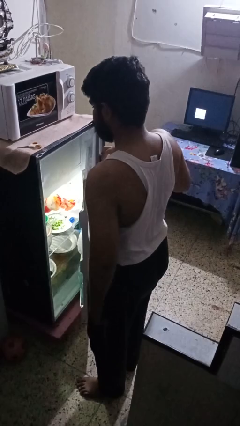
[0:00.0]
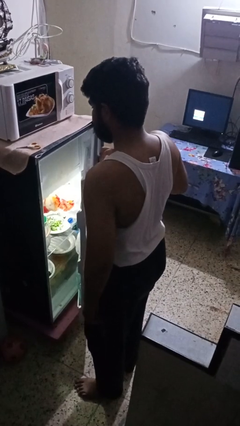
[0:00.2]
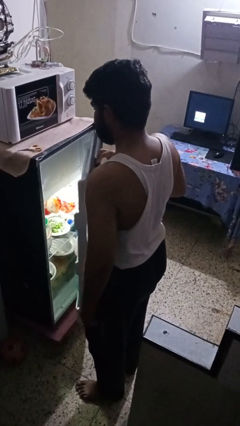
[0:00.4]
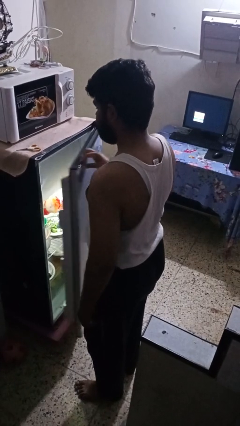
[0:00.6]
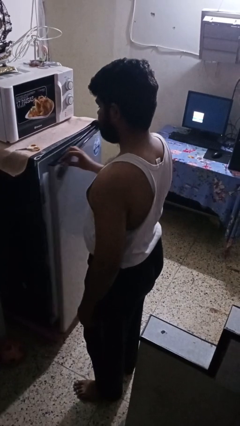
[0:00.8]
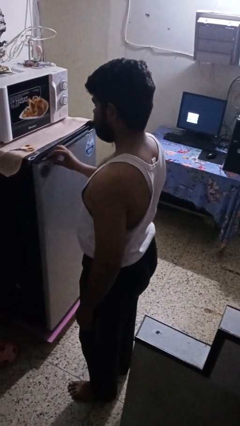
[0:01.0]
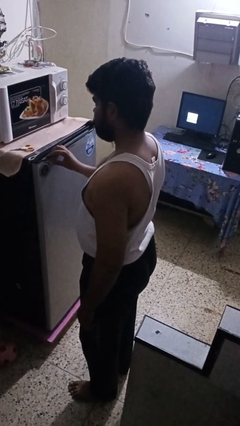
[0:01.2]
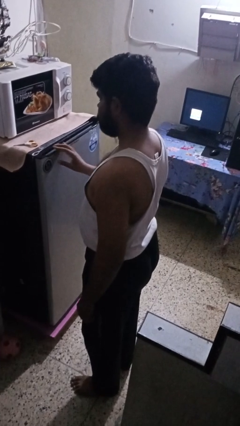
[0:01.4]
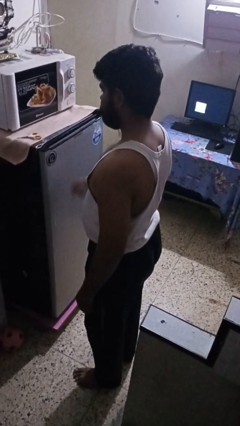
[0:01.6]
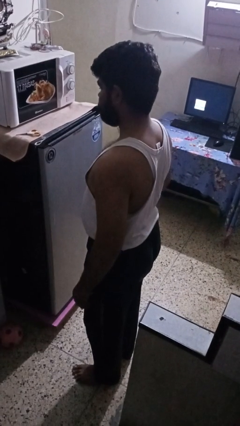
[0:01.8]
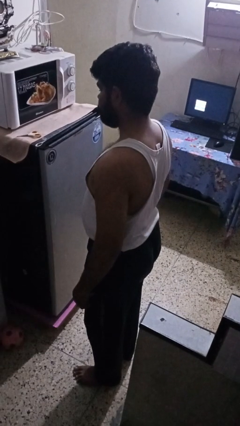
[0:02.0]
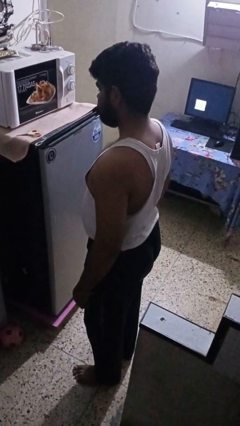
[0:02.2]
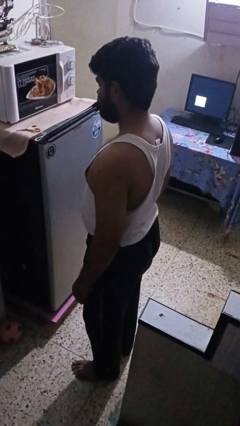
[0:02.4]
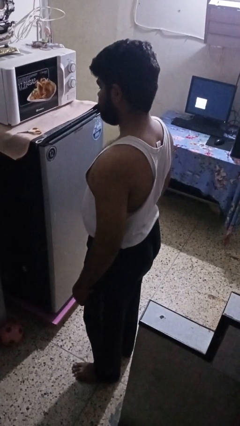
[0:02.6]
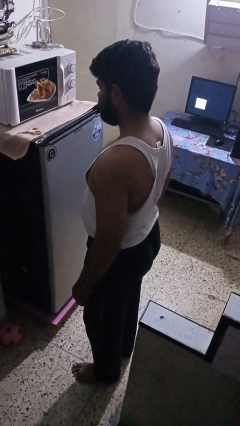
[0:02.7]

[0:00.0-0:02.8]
person closes refrigerator

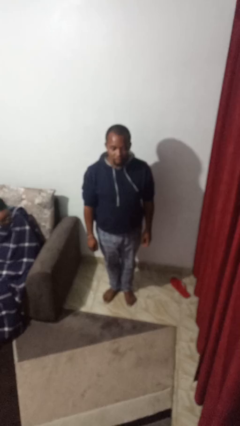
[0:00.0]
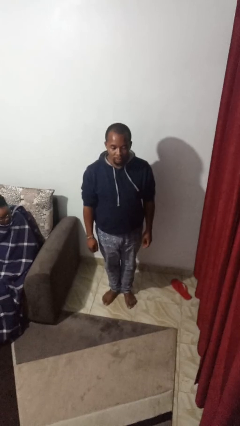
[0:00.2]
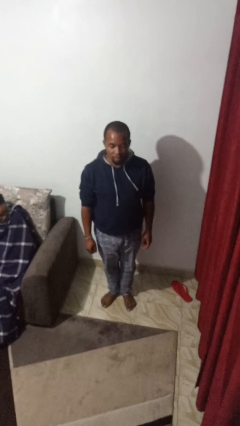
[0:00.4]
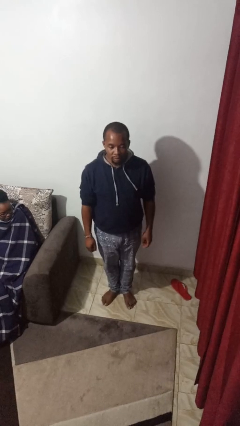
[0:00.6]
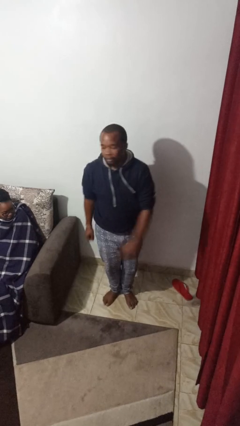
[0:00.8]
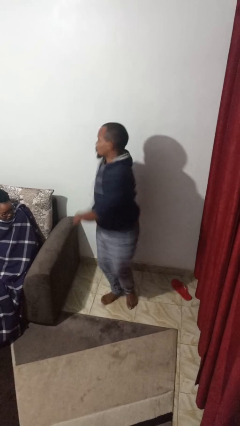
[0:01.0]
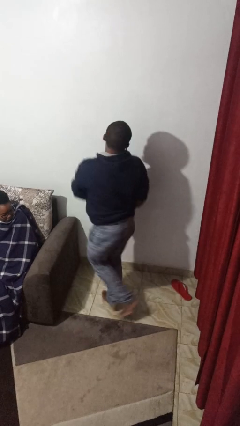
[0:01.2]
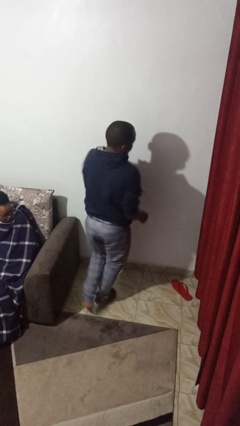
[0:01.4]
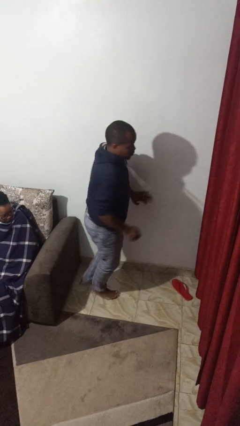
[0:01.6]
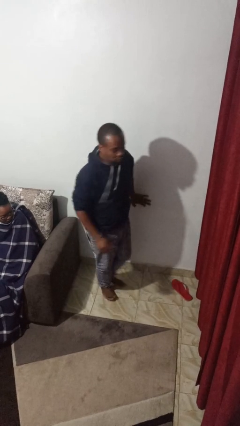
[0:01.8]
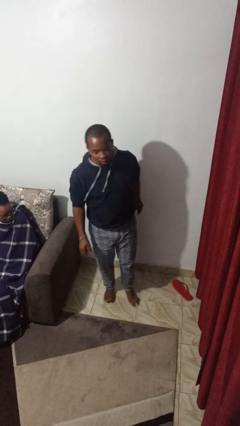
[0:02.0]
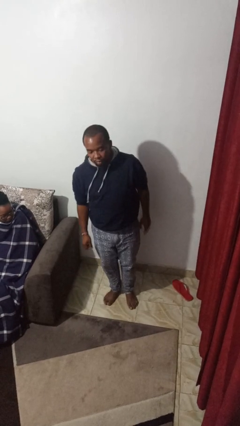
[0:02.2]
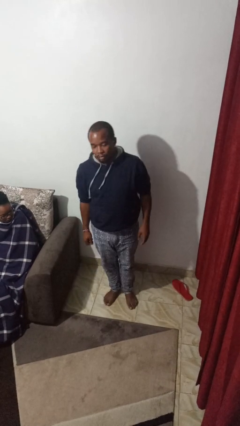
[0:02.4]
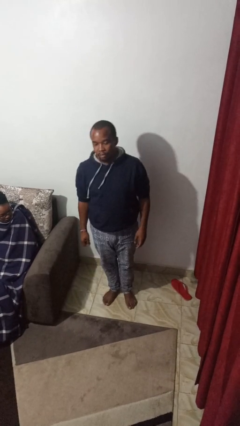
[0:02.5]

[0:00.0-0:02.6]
person twirls

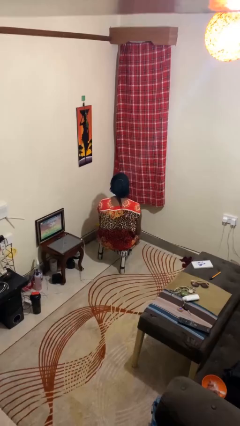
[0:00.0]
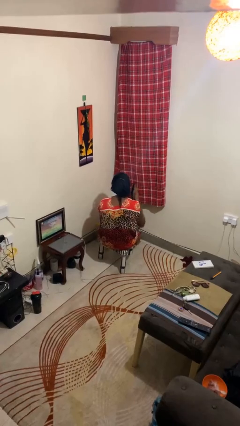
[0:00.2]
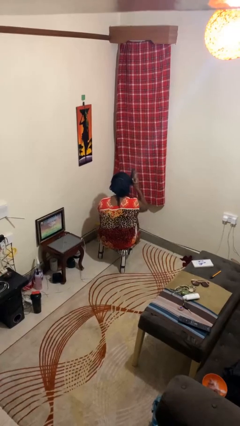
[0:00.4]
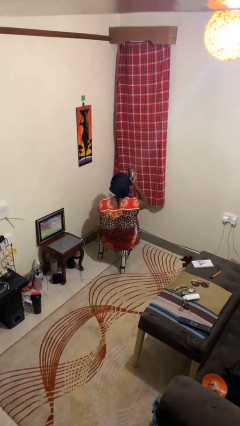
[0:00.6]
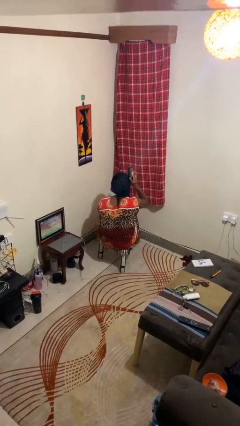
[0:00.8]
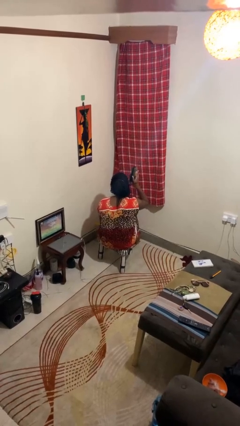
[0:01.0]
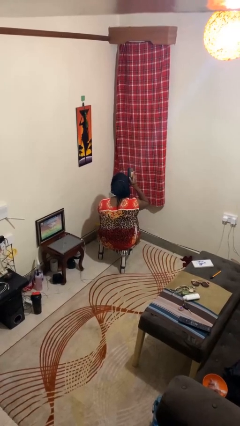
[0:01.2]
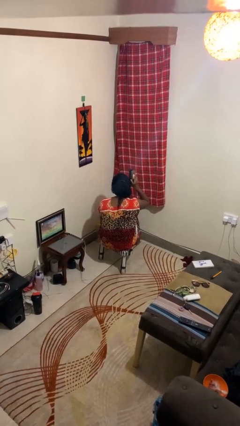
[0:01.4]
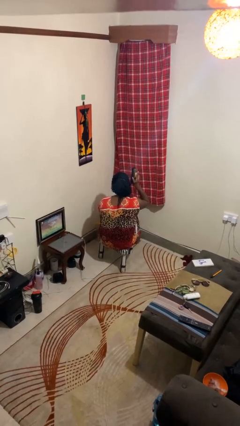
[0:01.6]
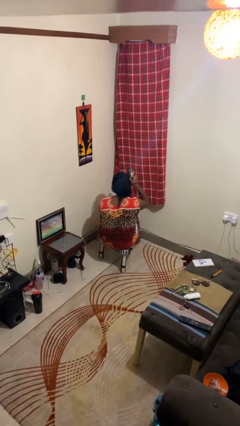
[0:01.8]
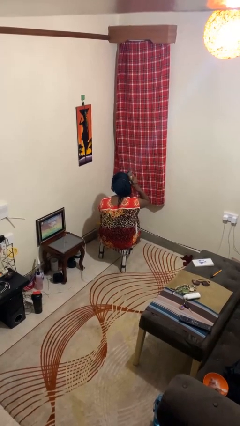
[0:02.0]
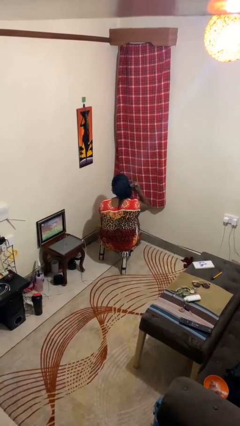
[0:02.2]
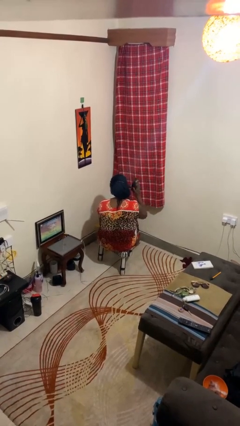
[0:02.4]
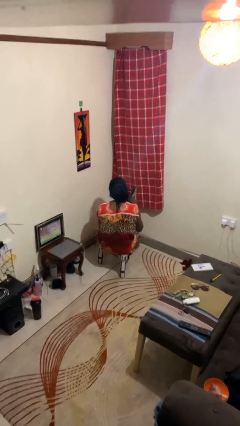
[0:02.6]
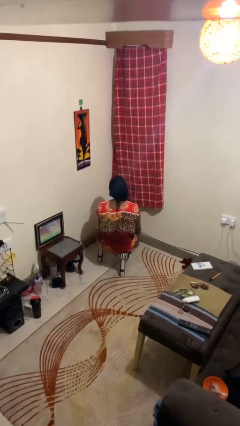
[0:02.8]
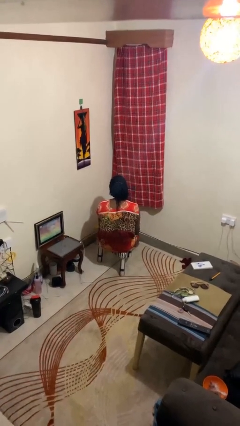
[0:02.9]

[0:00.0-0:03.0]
person brushes hair

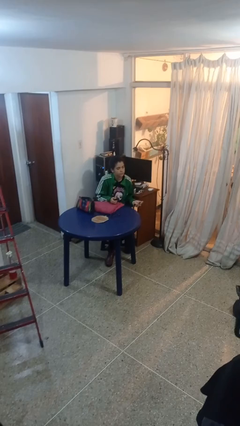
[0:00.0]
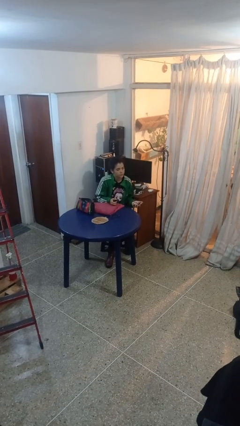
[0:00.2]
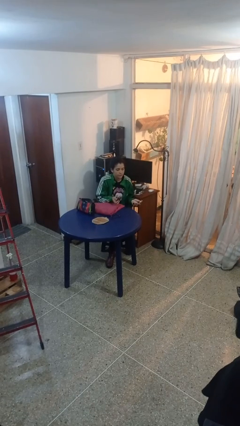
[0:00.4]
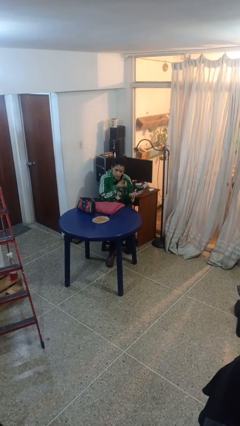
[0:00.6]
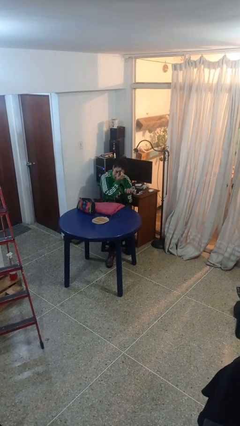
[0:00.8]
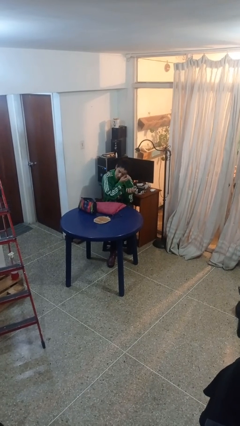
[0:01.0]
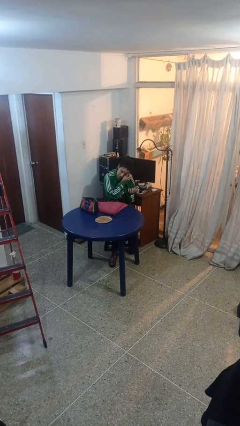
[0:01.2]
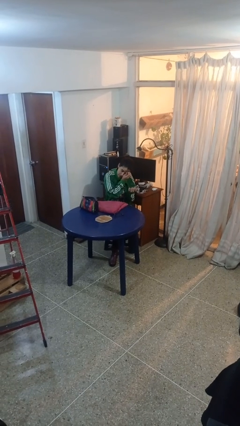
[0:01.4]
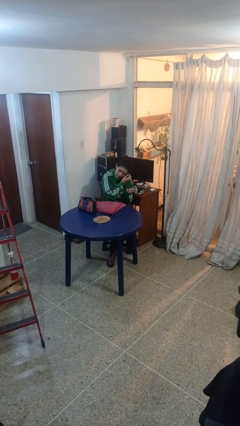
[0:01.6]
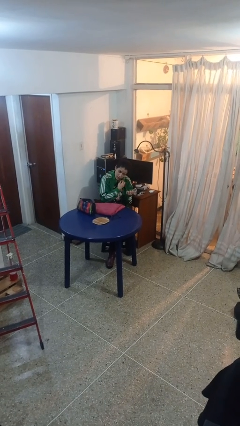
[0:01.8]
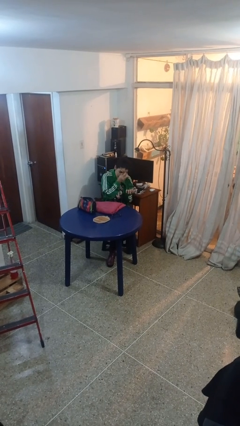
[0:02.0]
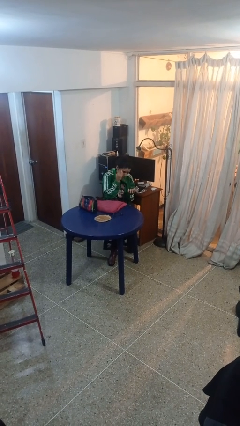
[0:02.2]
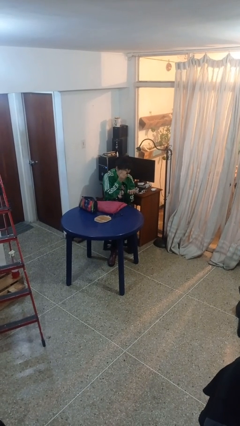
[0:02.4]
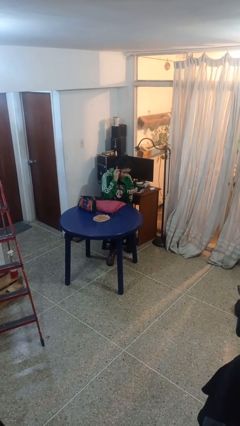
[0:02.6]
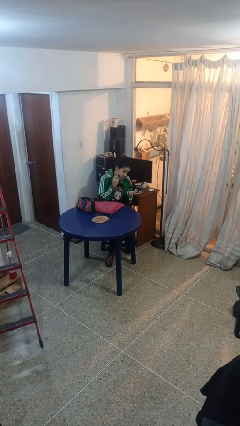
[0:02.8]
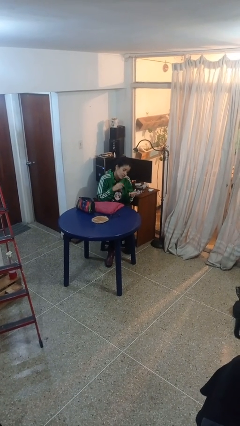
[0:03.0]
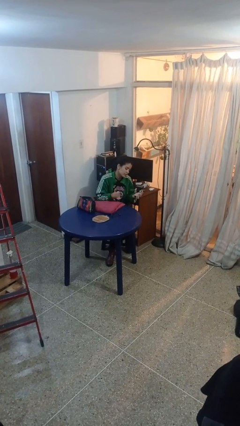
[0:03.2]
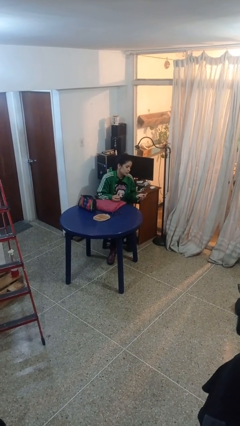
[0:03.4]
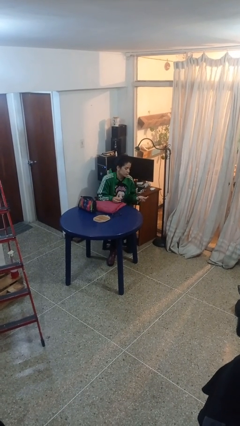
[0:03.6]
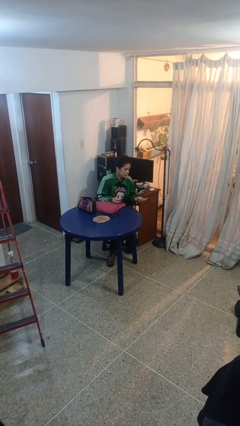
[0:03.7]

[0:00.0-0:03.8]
person applies foundation makeup

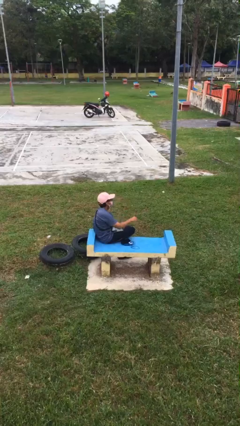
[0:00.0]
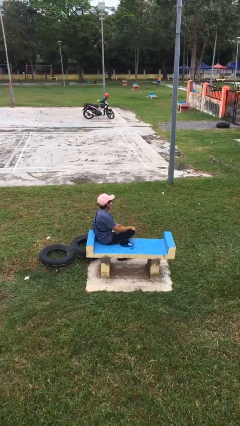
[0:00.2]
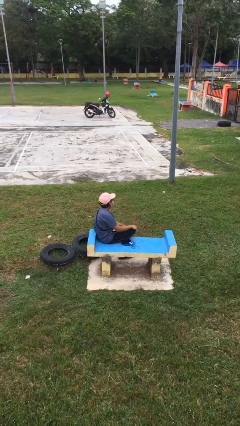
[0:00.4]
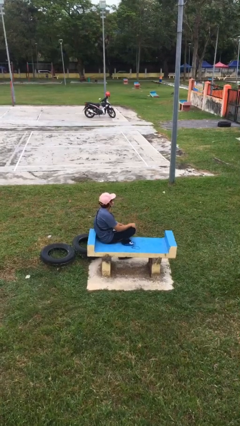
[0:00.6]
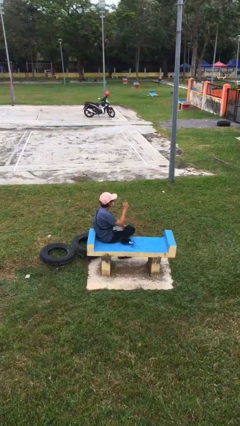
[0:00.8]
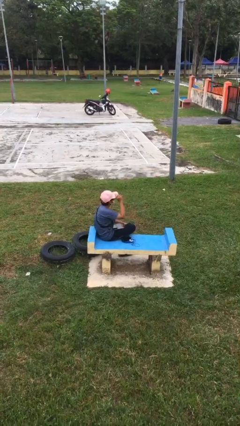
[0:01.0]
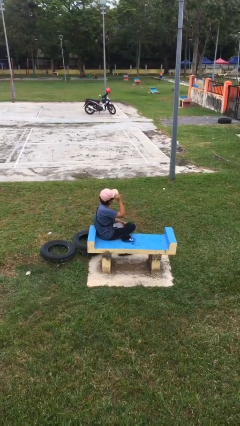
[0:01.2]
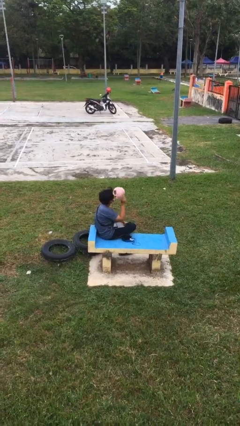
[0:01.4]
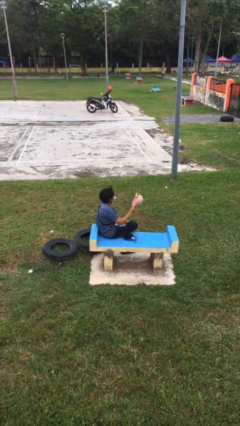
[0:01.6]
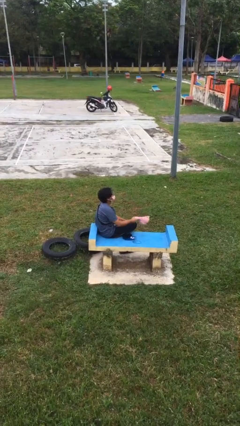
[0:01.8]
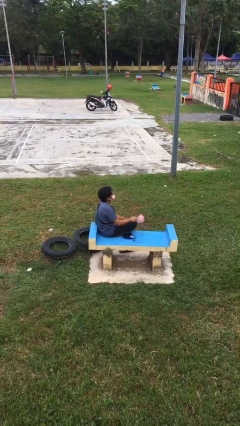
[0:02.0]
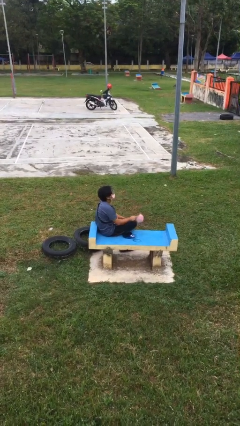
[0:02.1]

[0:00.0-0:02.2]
person takes off hat

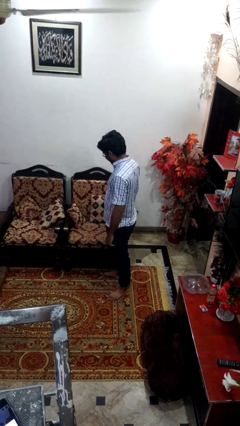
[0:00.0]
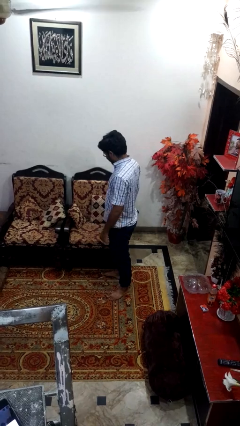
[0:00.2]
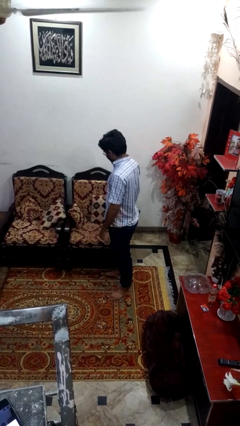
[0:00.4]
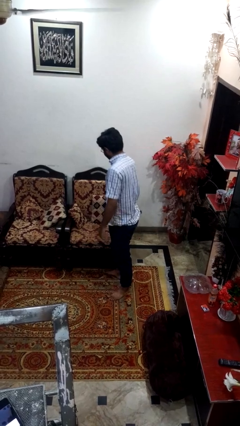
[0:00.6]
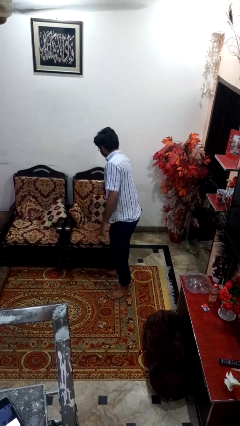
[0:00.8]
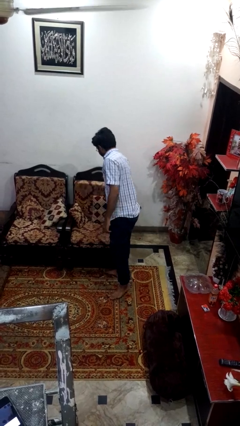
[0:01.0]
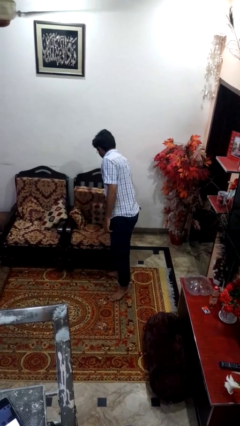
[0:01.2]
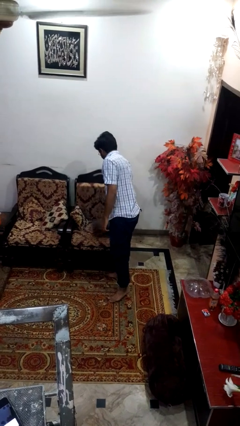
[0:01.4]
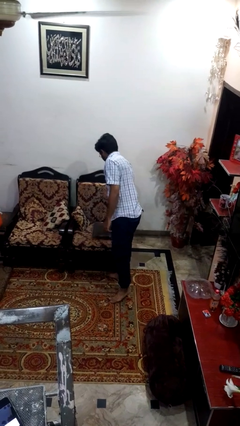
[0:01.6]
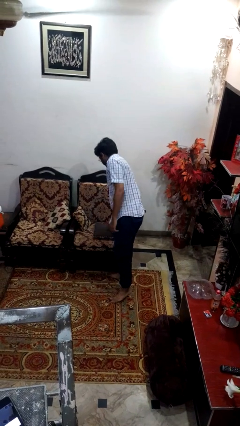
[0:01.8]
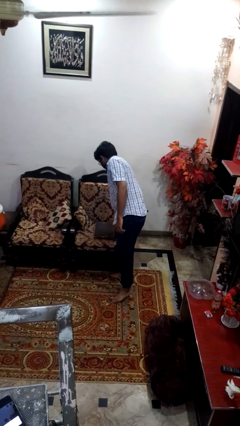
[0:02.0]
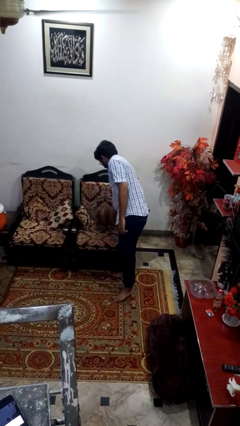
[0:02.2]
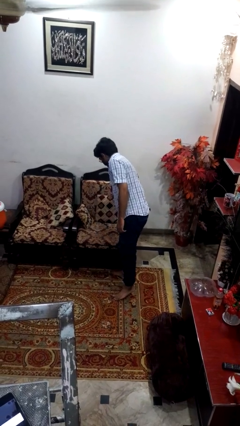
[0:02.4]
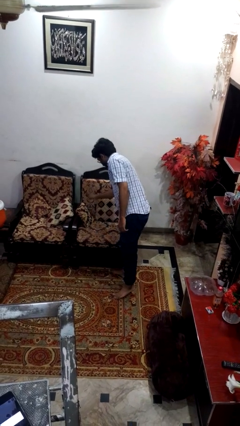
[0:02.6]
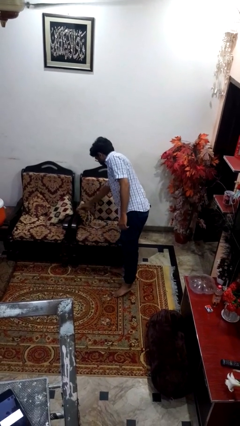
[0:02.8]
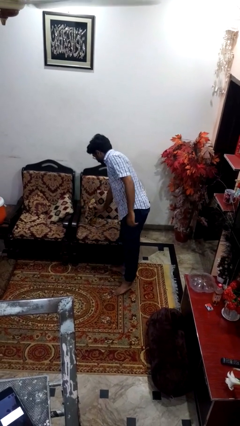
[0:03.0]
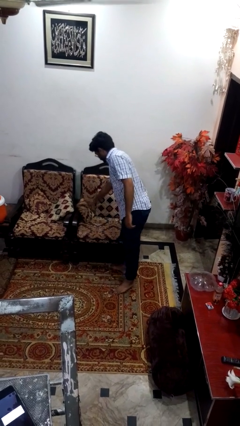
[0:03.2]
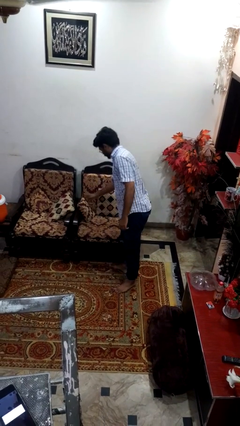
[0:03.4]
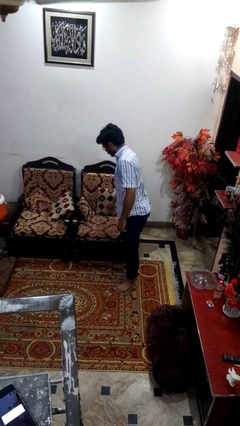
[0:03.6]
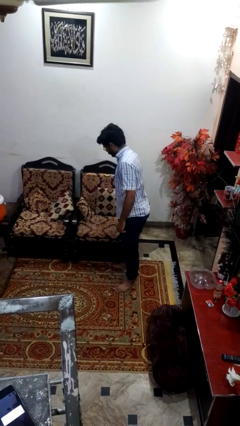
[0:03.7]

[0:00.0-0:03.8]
person searches in couch
